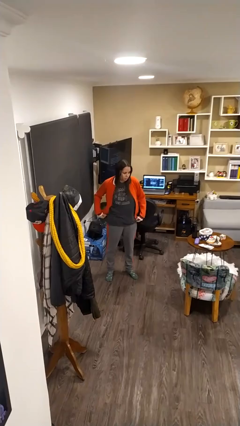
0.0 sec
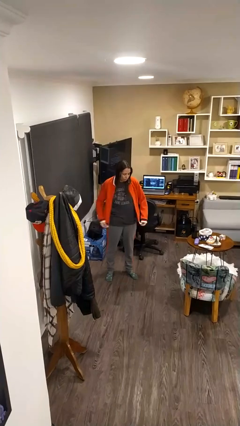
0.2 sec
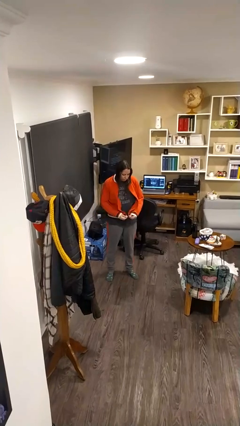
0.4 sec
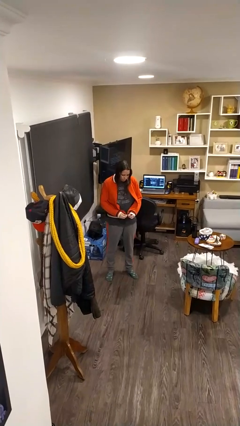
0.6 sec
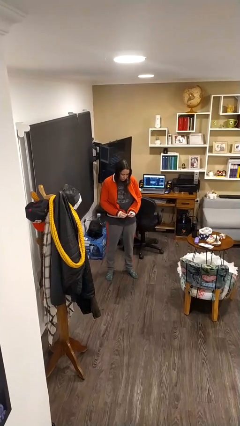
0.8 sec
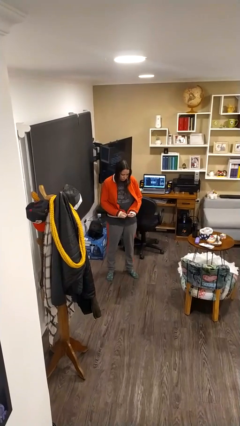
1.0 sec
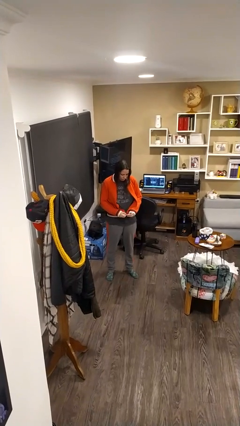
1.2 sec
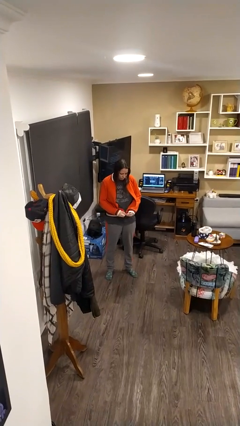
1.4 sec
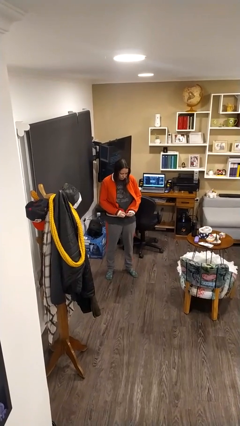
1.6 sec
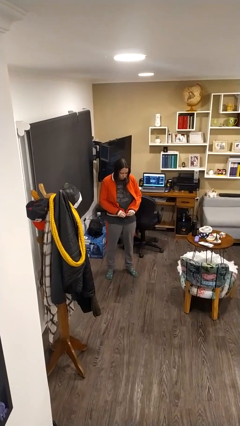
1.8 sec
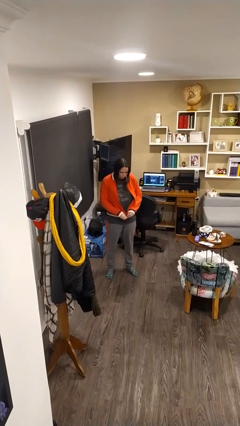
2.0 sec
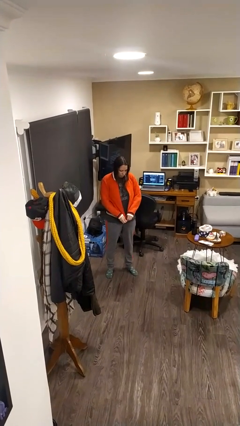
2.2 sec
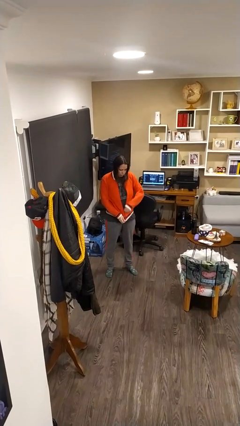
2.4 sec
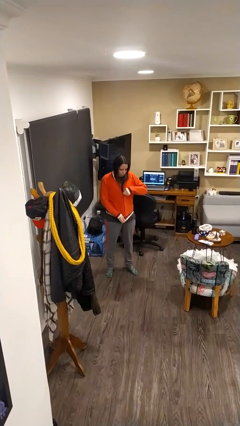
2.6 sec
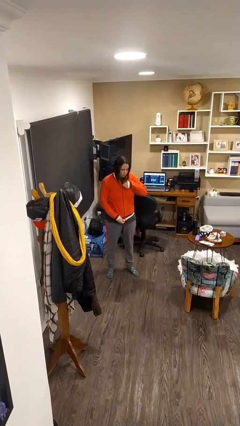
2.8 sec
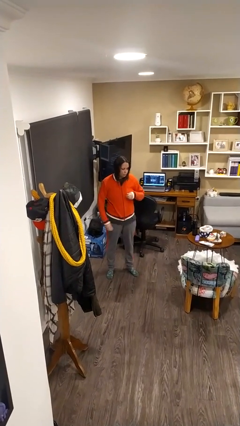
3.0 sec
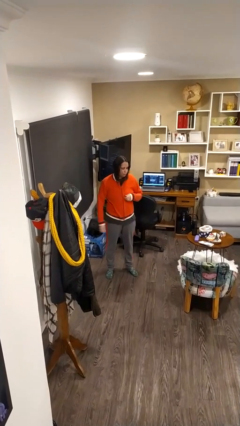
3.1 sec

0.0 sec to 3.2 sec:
person zips up jacket

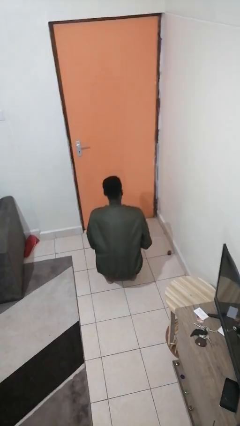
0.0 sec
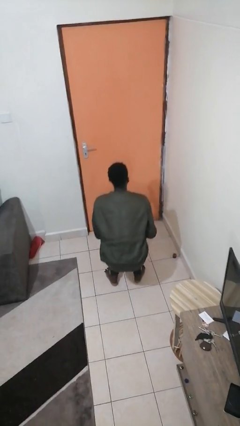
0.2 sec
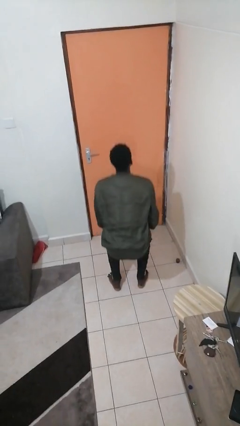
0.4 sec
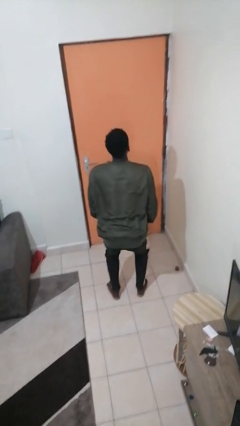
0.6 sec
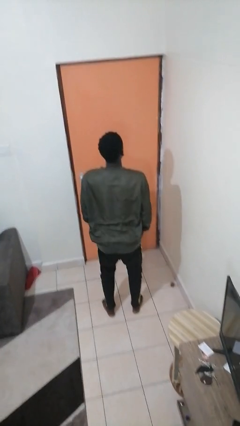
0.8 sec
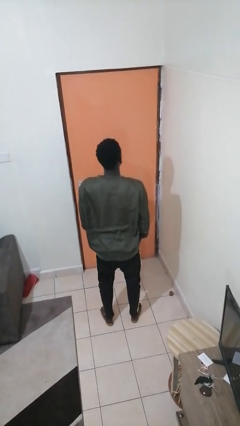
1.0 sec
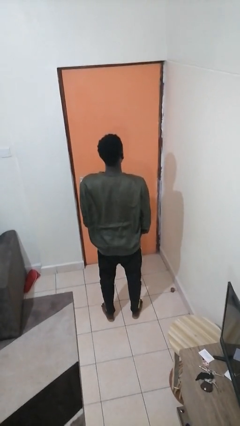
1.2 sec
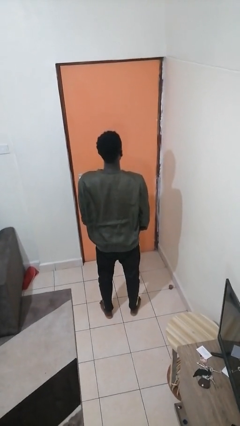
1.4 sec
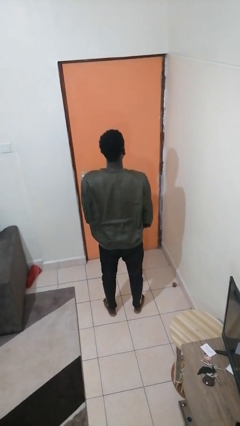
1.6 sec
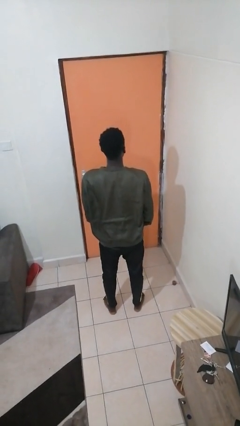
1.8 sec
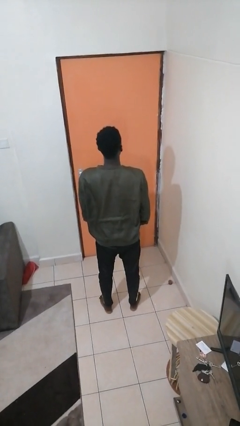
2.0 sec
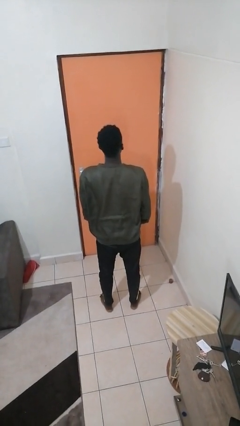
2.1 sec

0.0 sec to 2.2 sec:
person stands up

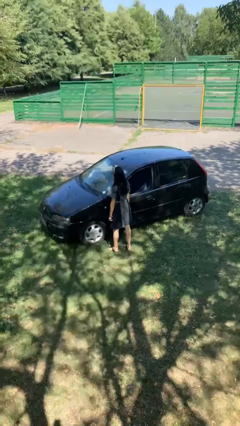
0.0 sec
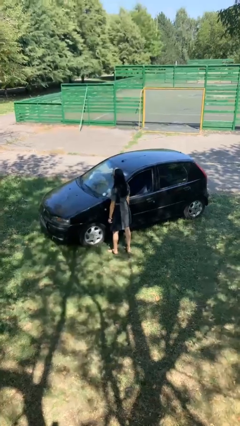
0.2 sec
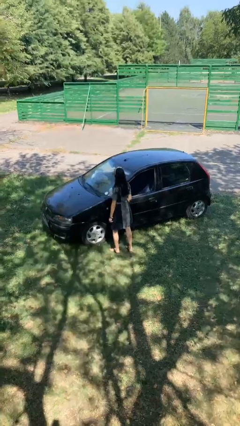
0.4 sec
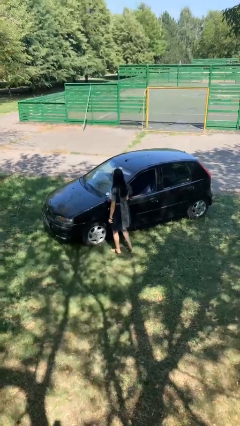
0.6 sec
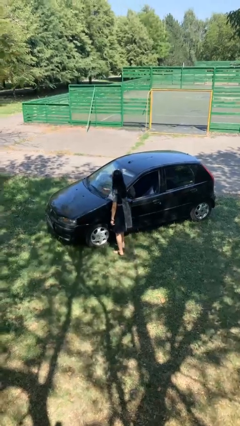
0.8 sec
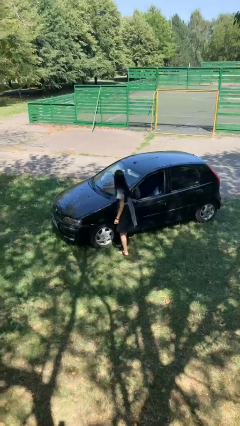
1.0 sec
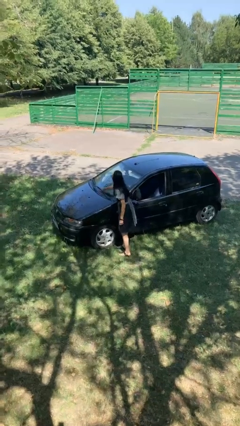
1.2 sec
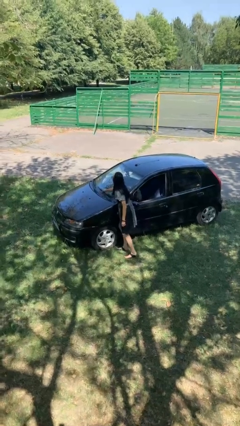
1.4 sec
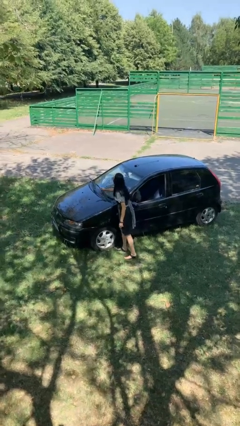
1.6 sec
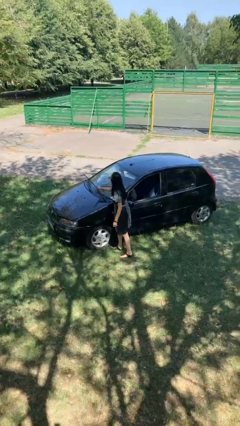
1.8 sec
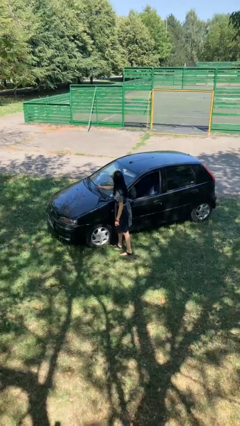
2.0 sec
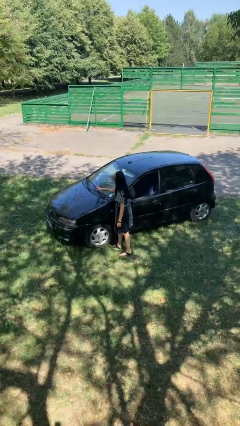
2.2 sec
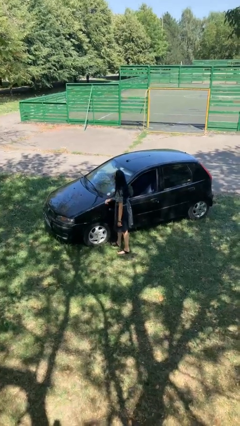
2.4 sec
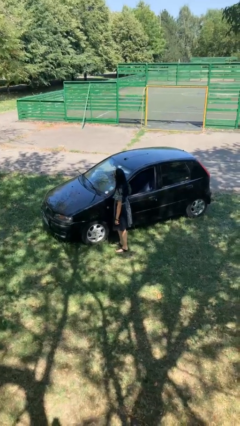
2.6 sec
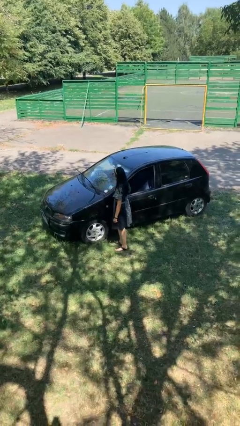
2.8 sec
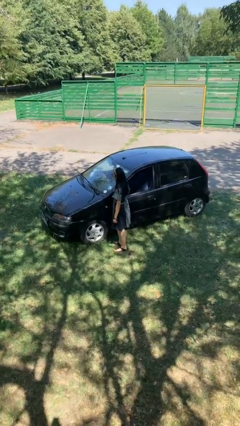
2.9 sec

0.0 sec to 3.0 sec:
person flips up car wipers

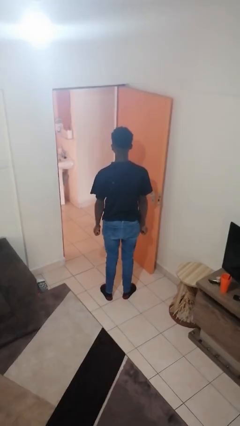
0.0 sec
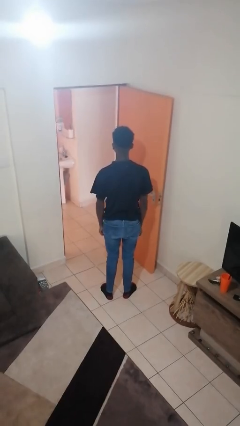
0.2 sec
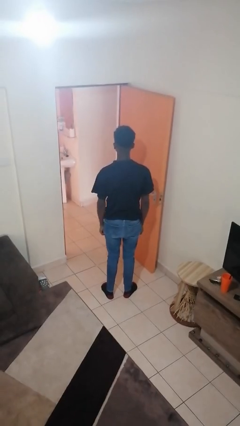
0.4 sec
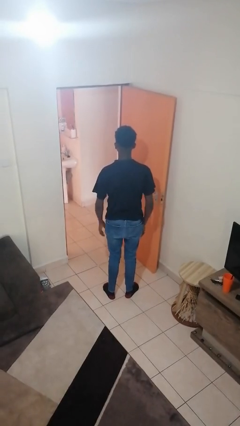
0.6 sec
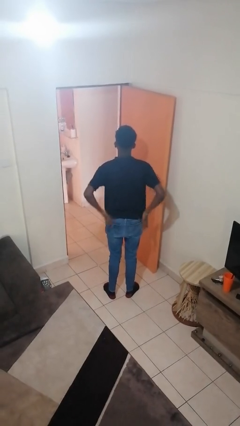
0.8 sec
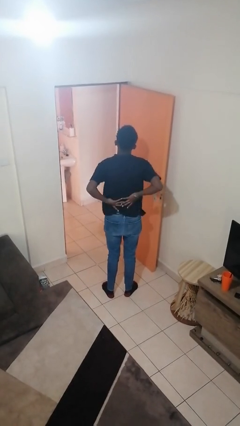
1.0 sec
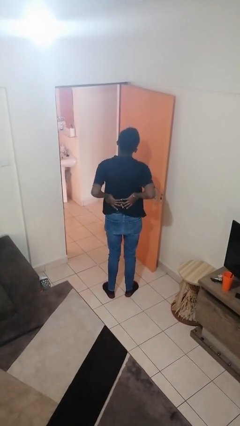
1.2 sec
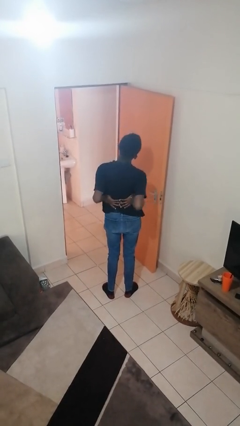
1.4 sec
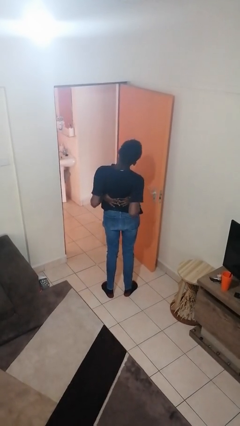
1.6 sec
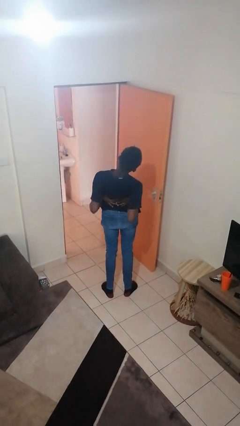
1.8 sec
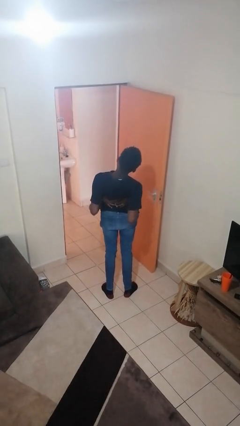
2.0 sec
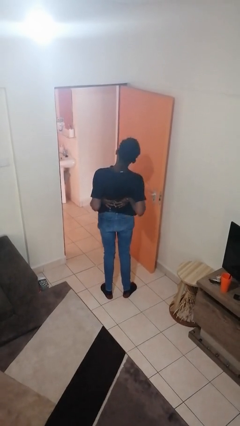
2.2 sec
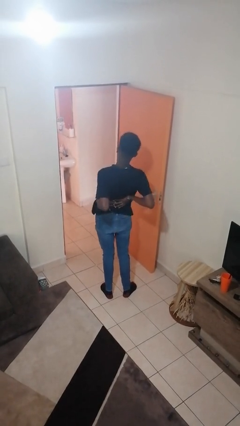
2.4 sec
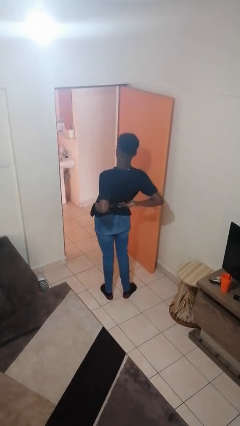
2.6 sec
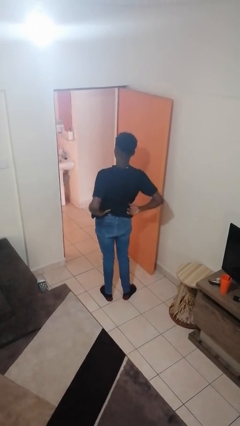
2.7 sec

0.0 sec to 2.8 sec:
person stretches back

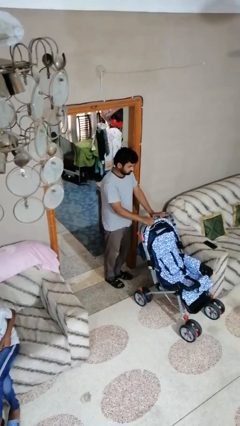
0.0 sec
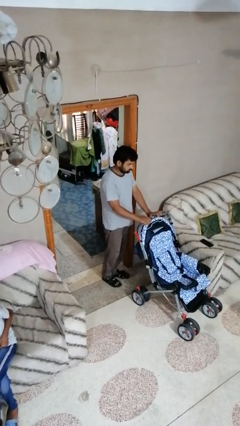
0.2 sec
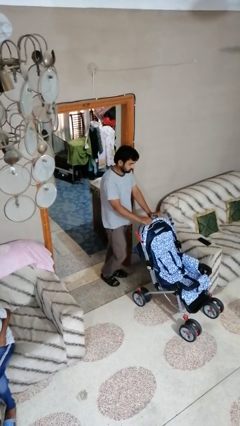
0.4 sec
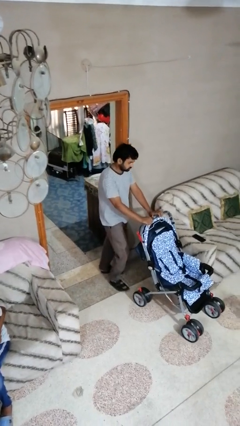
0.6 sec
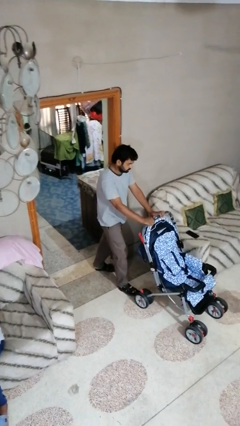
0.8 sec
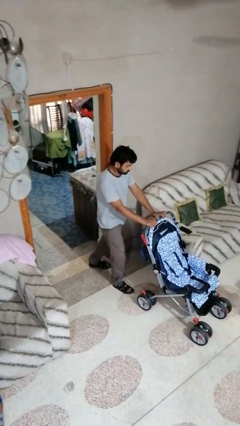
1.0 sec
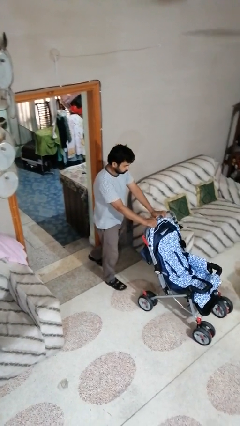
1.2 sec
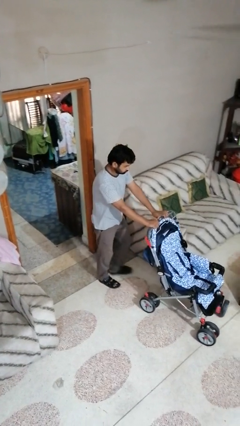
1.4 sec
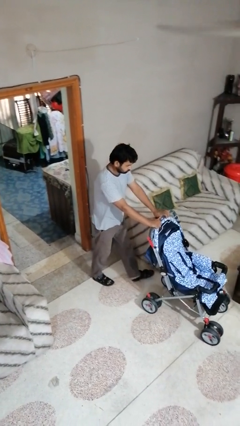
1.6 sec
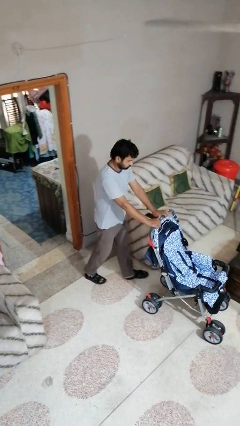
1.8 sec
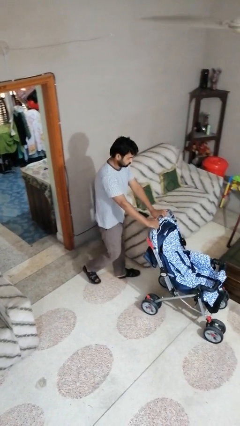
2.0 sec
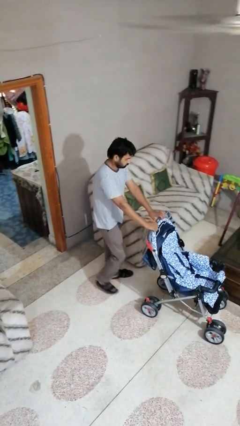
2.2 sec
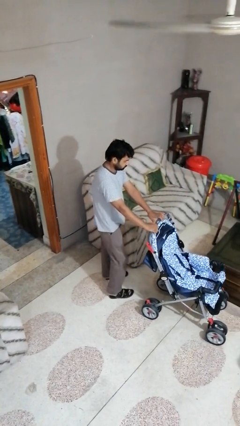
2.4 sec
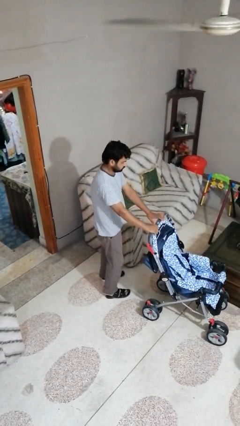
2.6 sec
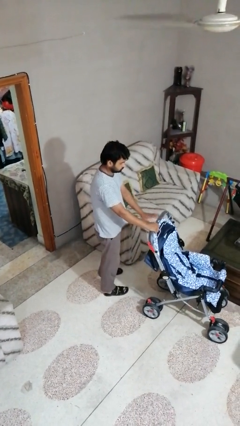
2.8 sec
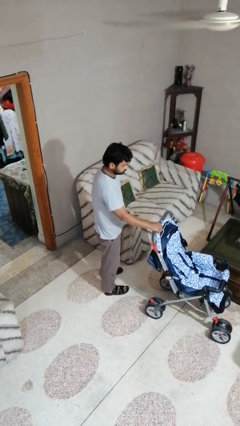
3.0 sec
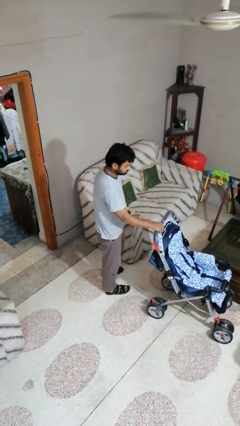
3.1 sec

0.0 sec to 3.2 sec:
person pushes wheeled cart

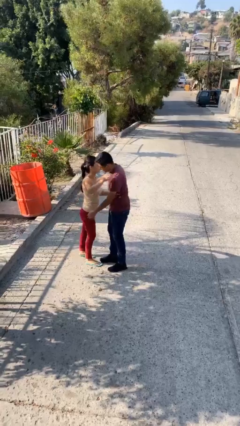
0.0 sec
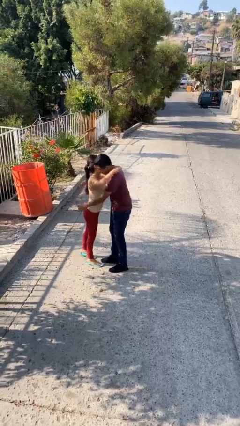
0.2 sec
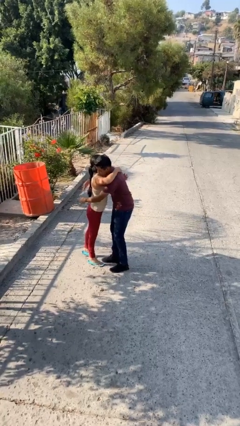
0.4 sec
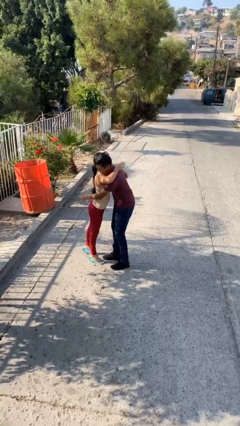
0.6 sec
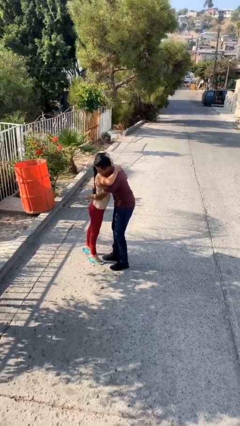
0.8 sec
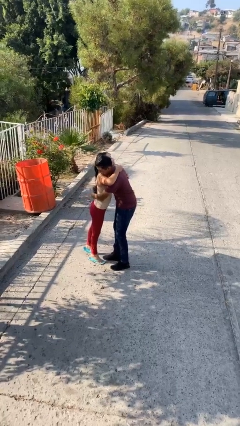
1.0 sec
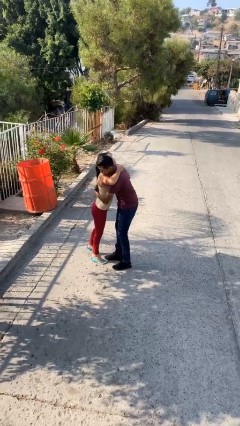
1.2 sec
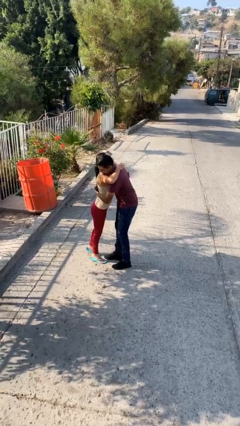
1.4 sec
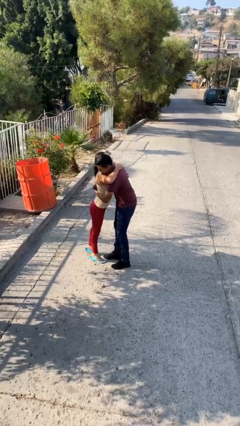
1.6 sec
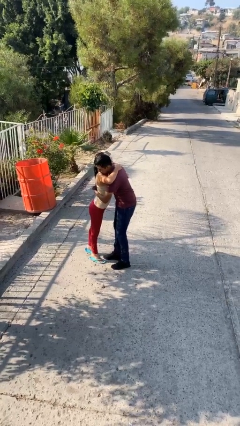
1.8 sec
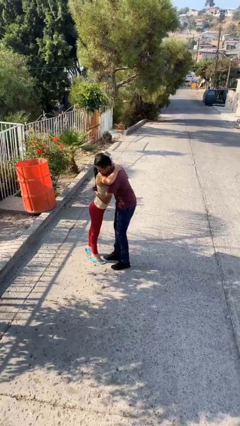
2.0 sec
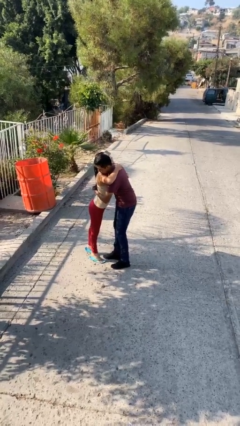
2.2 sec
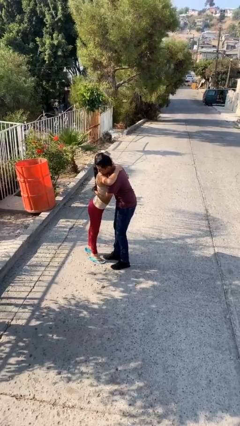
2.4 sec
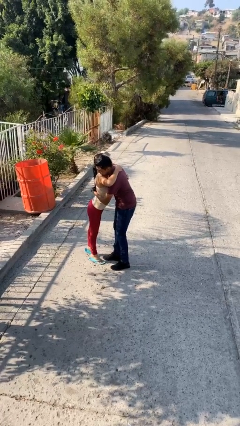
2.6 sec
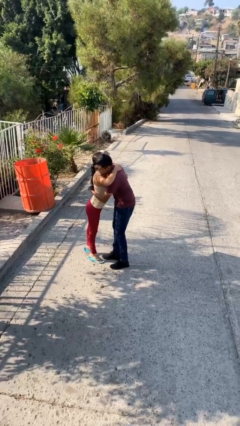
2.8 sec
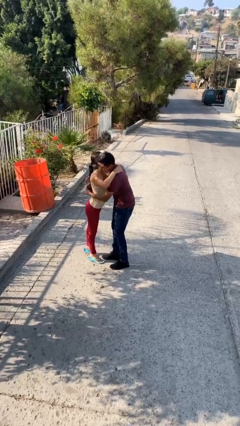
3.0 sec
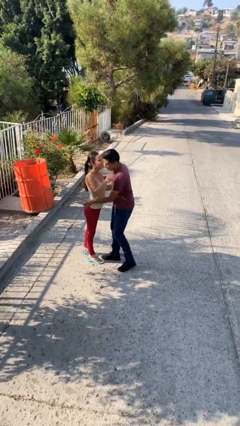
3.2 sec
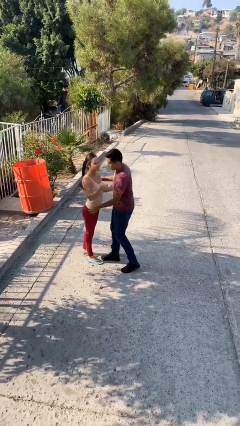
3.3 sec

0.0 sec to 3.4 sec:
person embraces person
